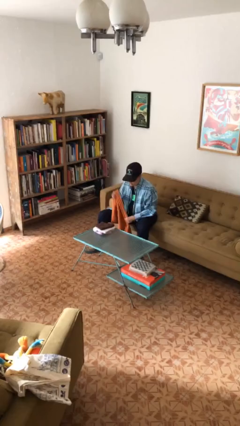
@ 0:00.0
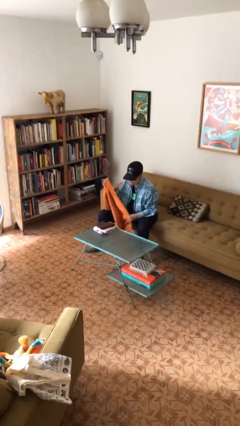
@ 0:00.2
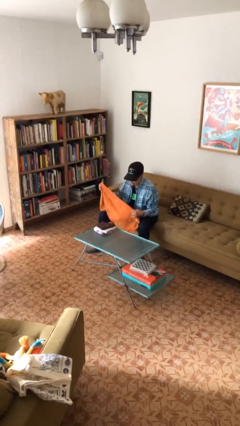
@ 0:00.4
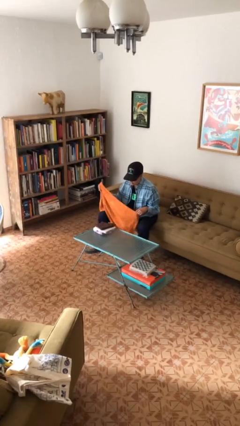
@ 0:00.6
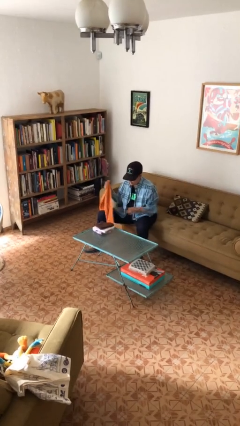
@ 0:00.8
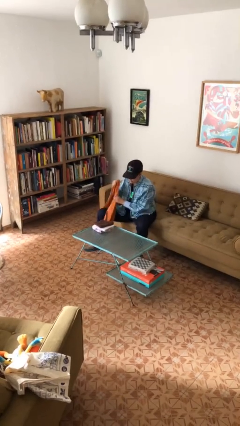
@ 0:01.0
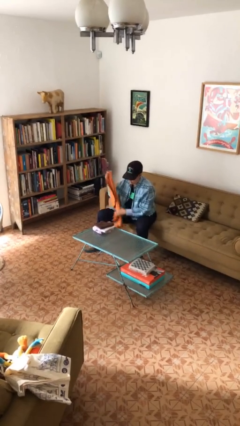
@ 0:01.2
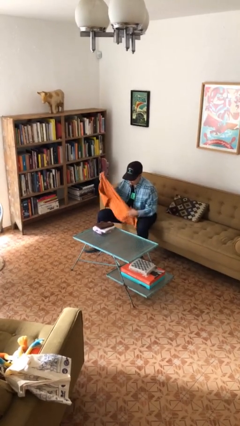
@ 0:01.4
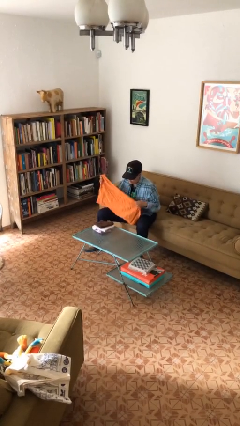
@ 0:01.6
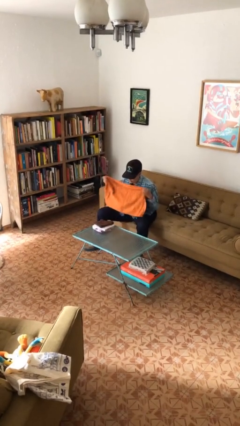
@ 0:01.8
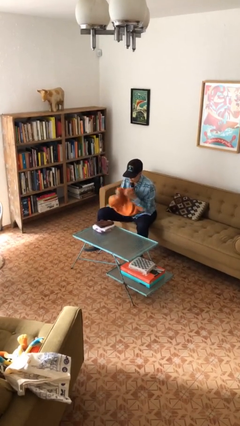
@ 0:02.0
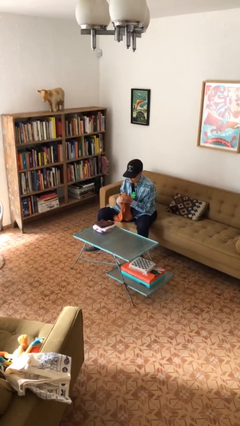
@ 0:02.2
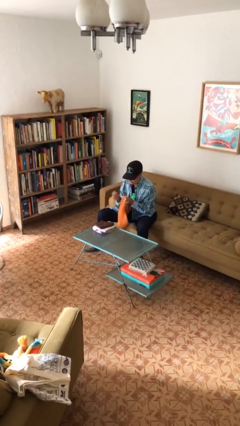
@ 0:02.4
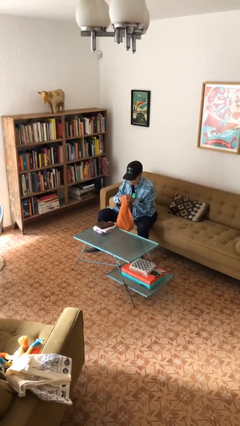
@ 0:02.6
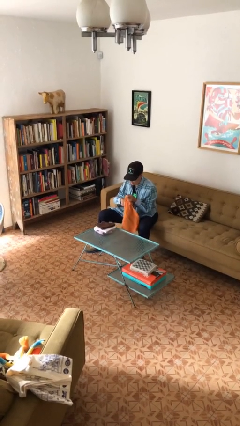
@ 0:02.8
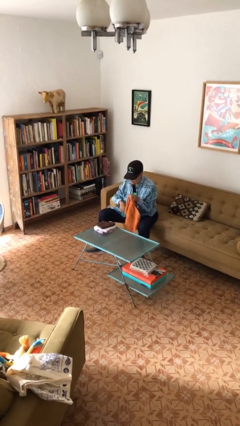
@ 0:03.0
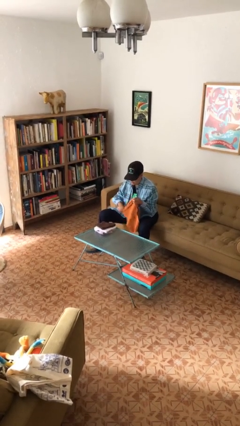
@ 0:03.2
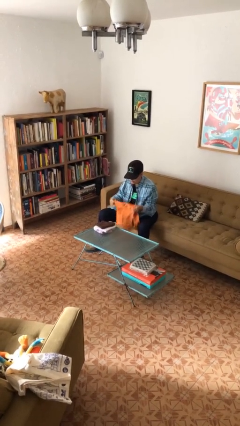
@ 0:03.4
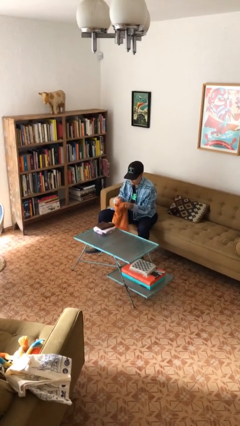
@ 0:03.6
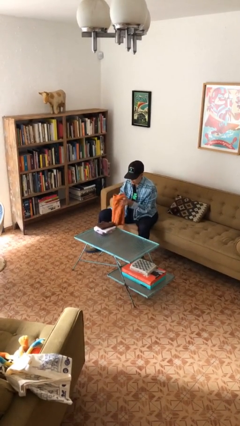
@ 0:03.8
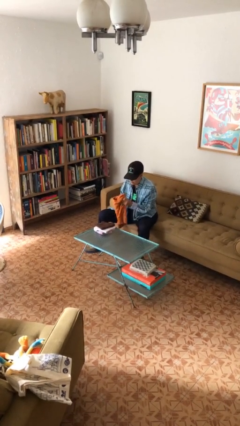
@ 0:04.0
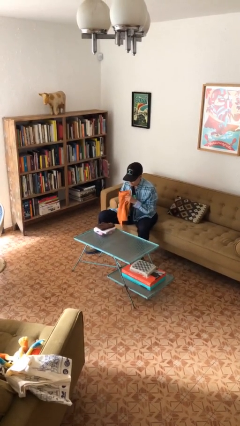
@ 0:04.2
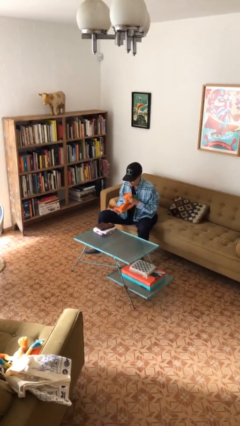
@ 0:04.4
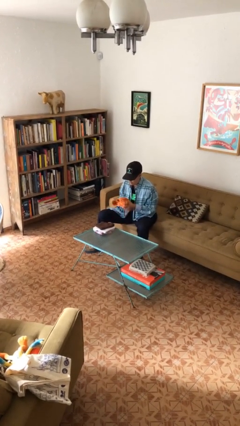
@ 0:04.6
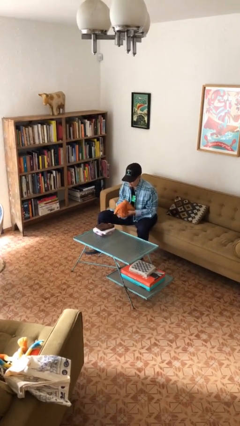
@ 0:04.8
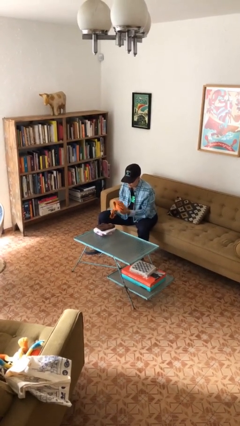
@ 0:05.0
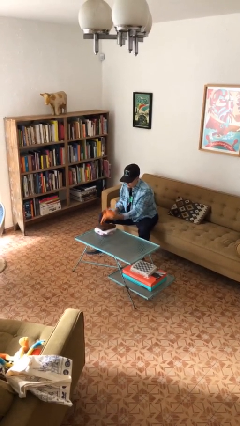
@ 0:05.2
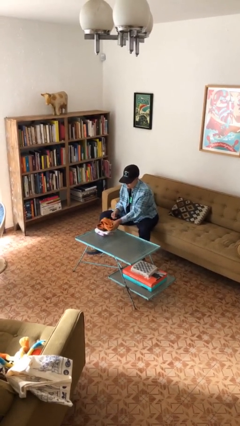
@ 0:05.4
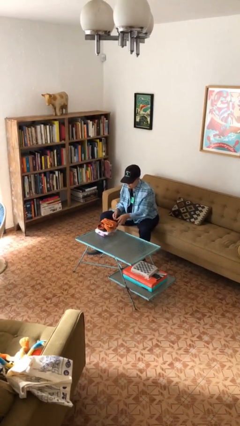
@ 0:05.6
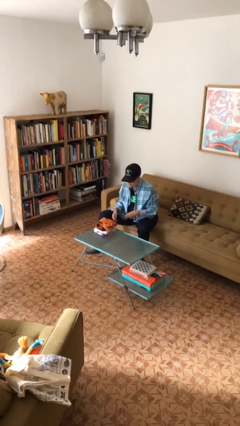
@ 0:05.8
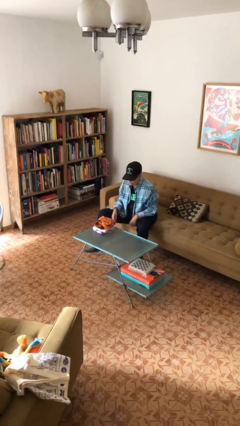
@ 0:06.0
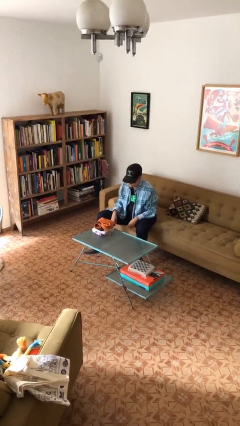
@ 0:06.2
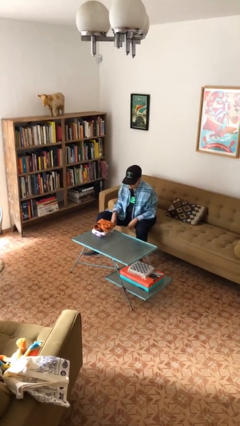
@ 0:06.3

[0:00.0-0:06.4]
person folds towel

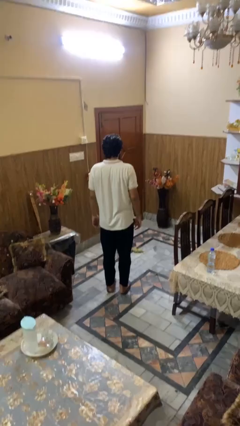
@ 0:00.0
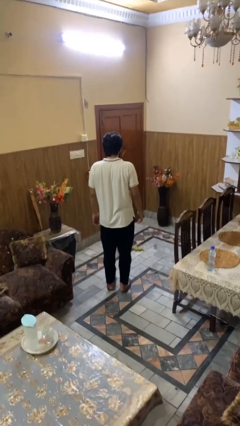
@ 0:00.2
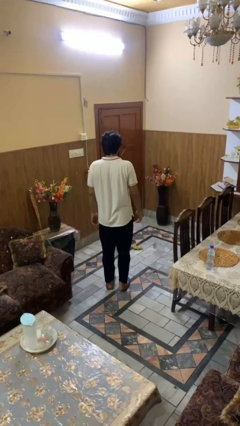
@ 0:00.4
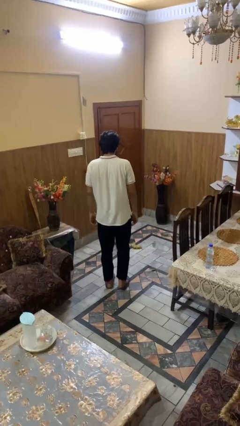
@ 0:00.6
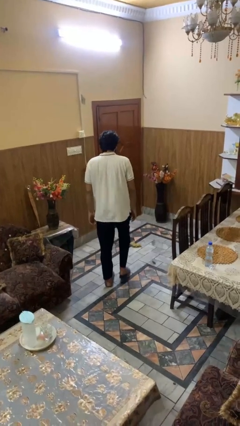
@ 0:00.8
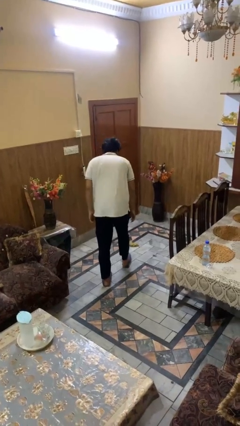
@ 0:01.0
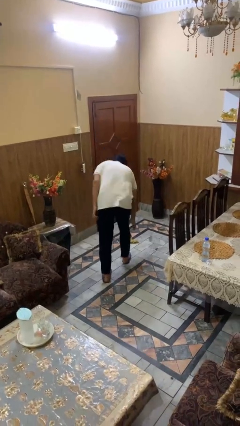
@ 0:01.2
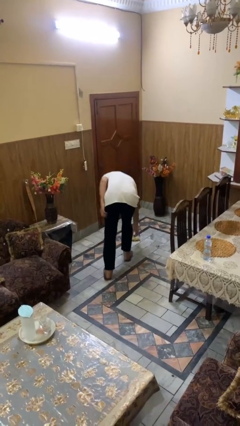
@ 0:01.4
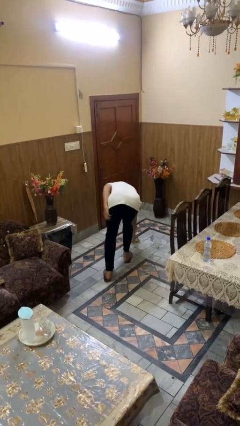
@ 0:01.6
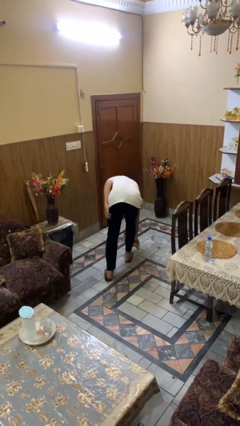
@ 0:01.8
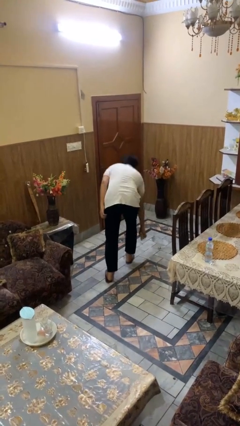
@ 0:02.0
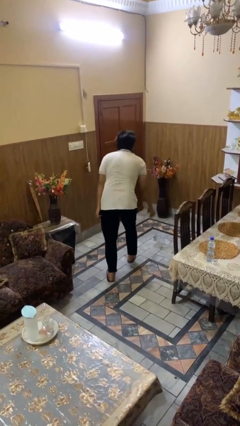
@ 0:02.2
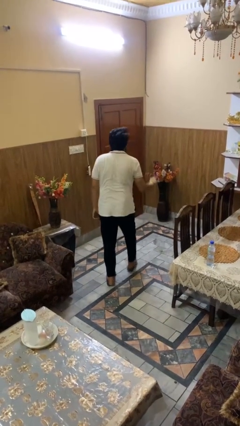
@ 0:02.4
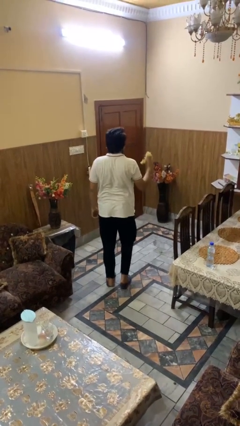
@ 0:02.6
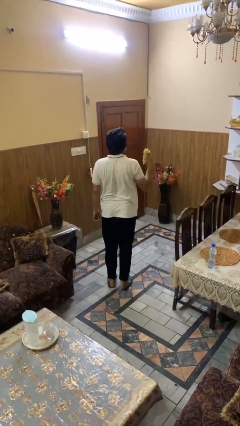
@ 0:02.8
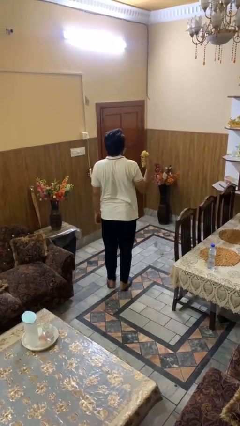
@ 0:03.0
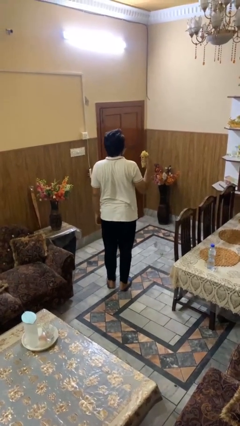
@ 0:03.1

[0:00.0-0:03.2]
person picks up object from floor

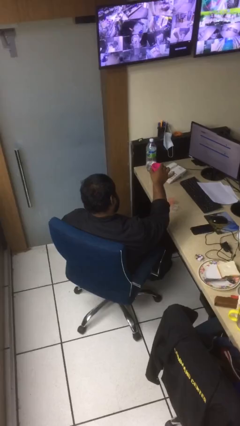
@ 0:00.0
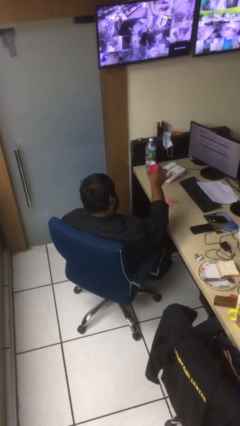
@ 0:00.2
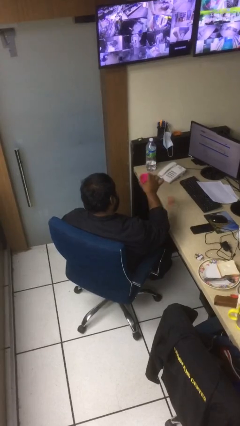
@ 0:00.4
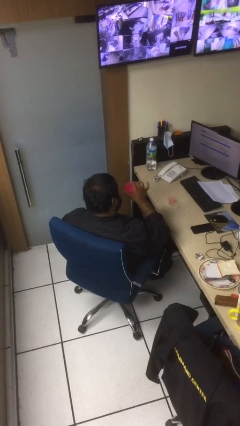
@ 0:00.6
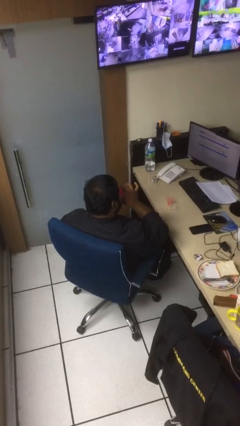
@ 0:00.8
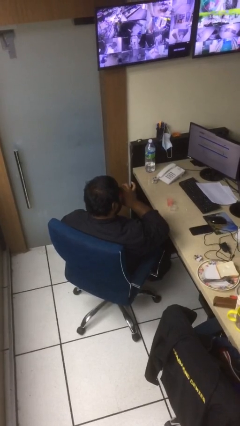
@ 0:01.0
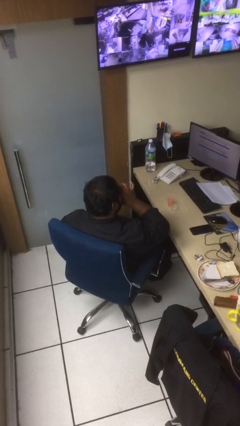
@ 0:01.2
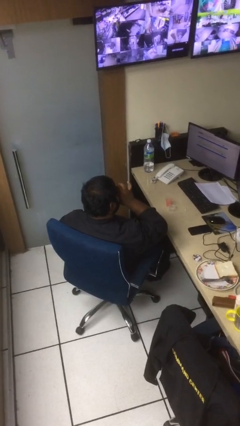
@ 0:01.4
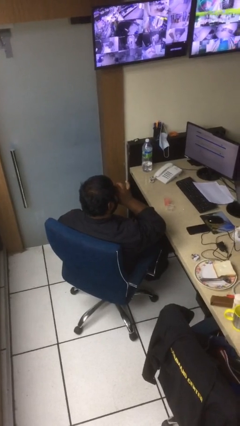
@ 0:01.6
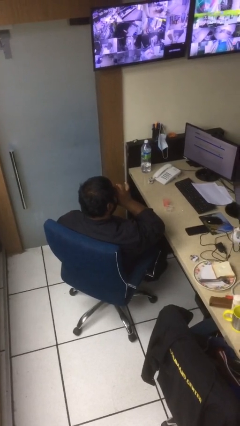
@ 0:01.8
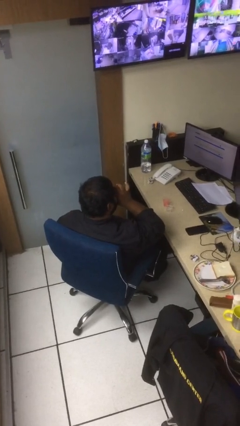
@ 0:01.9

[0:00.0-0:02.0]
person drinks from shotglass

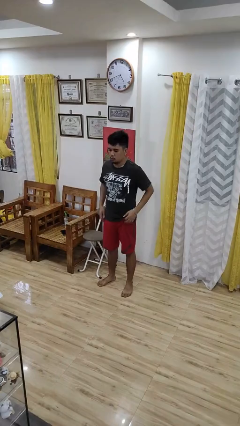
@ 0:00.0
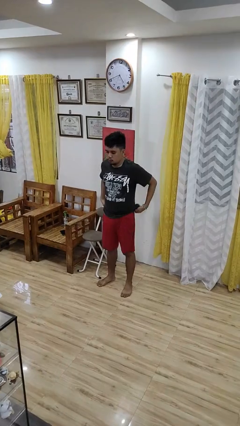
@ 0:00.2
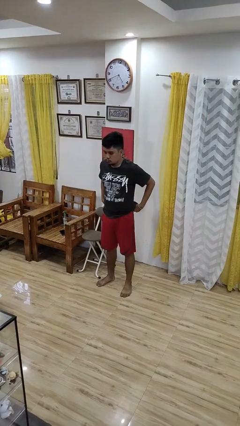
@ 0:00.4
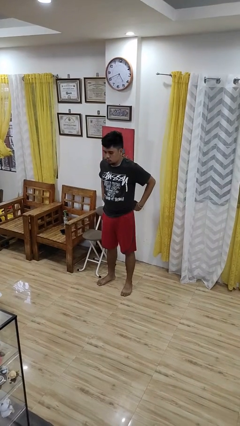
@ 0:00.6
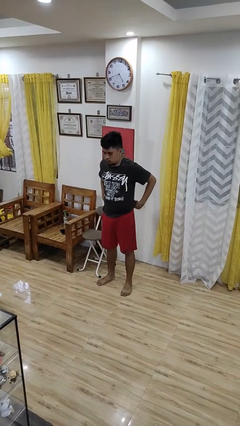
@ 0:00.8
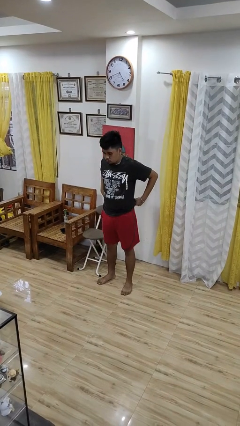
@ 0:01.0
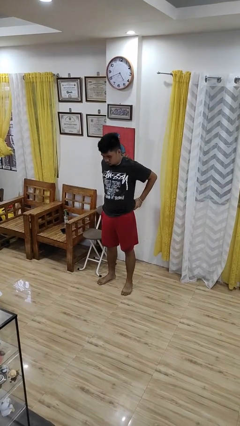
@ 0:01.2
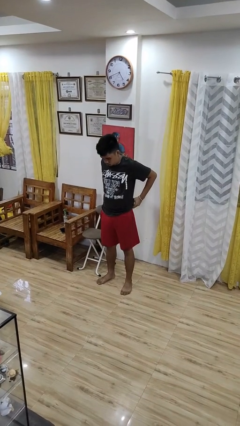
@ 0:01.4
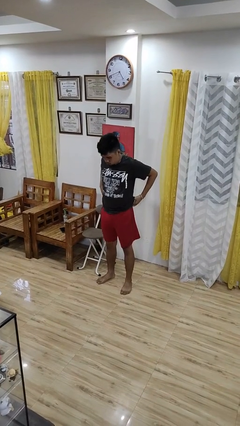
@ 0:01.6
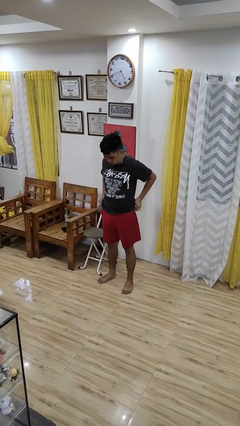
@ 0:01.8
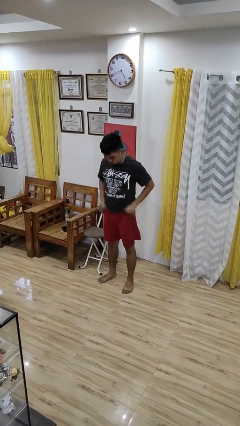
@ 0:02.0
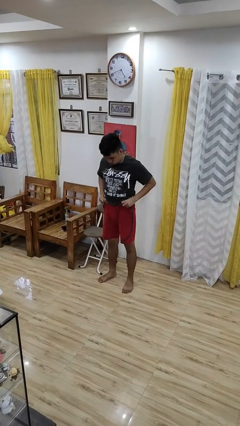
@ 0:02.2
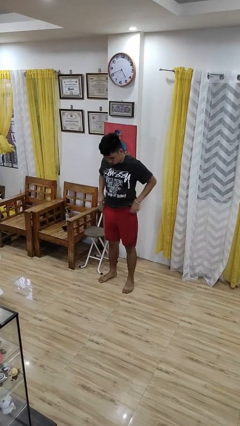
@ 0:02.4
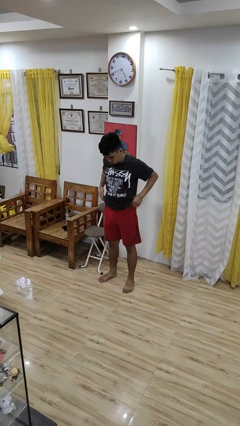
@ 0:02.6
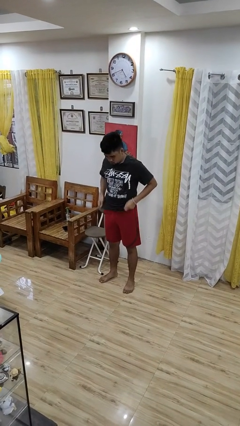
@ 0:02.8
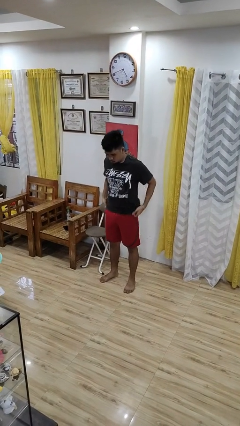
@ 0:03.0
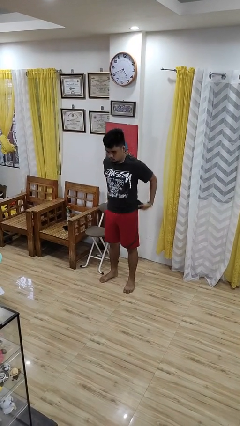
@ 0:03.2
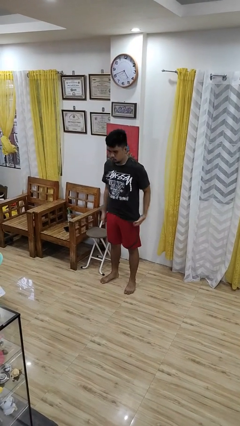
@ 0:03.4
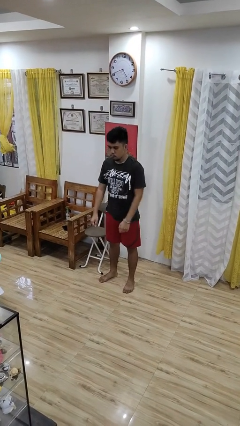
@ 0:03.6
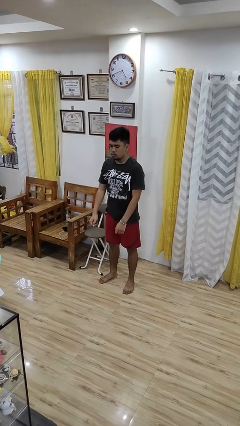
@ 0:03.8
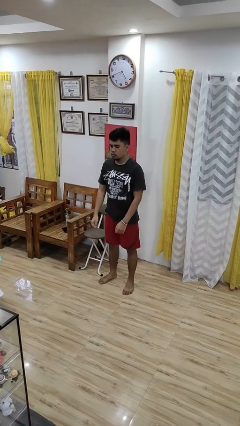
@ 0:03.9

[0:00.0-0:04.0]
person hikes up pants

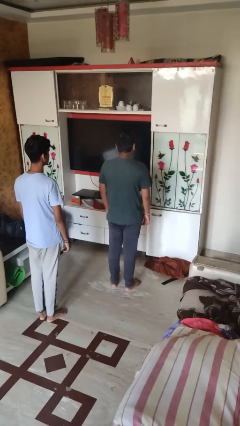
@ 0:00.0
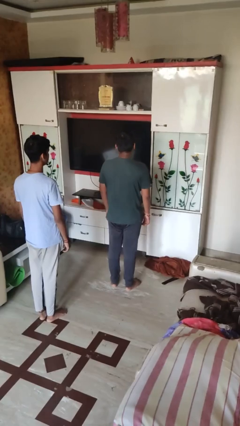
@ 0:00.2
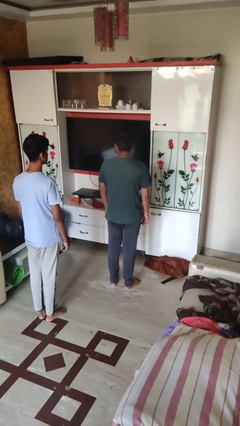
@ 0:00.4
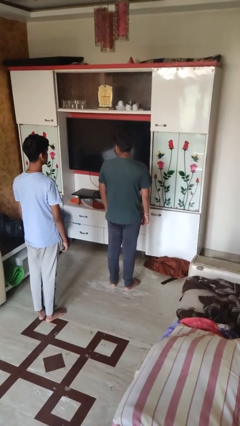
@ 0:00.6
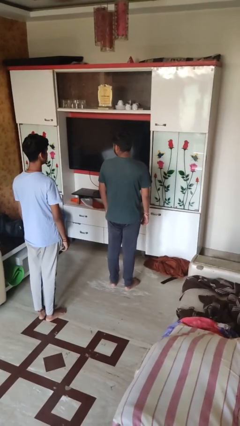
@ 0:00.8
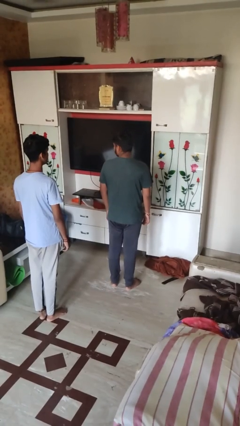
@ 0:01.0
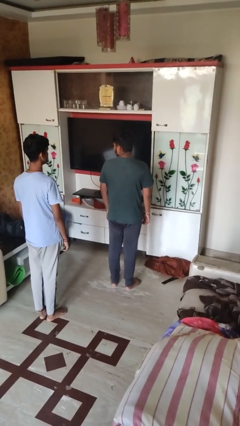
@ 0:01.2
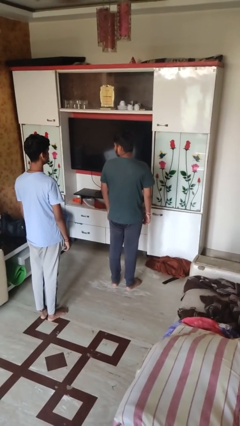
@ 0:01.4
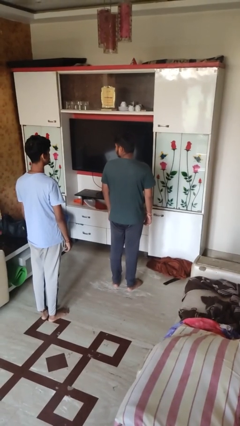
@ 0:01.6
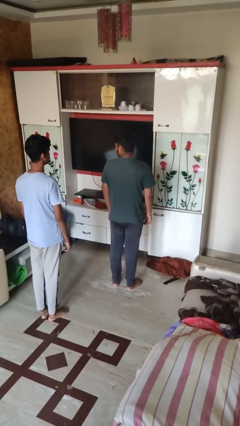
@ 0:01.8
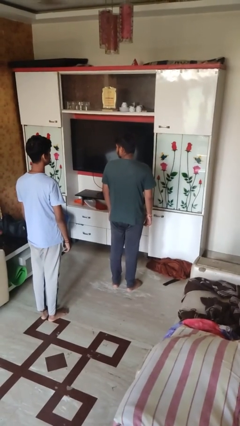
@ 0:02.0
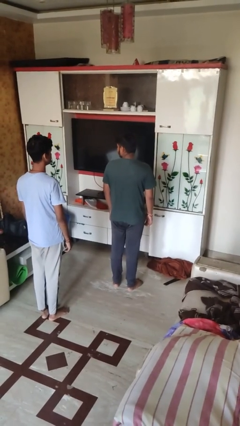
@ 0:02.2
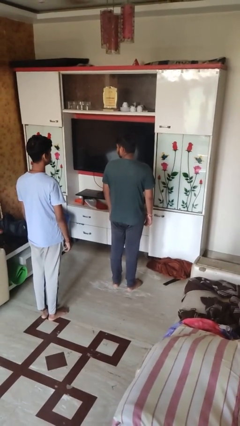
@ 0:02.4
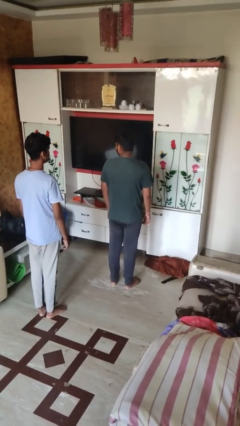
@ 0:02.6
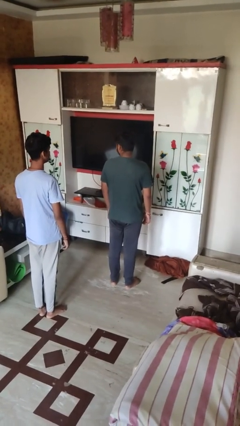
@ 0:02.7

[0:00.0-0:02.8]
person looks over shoulder
